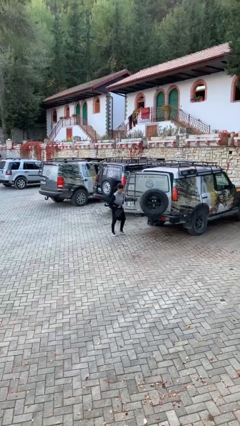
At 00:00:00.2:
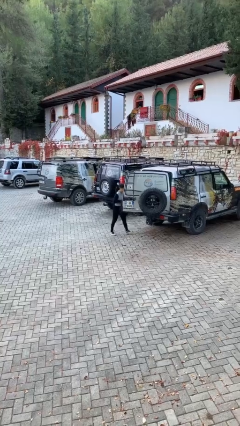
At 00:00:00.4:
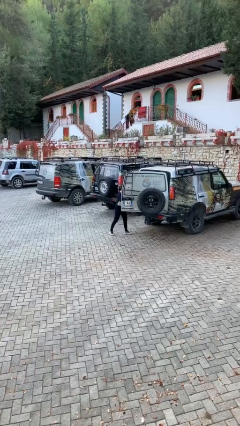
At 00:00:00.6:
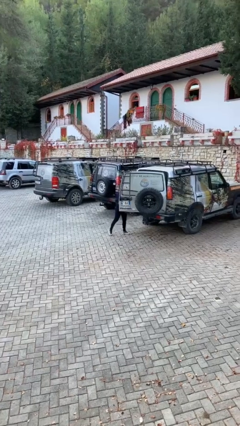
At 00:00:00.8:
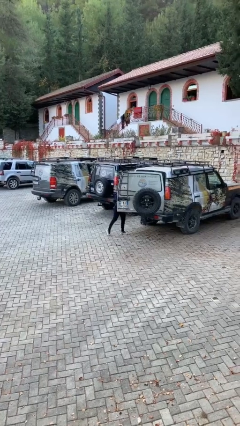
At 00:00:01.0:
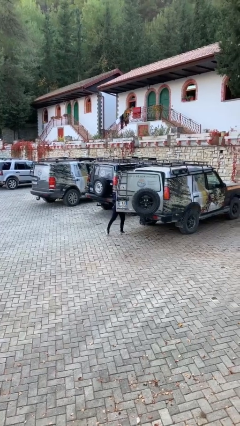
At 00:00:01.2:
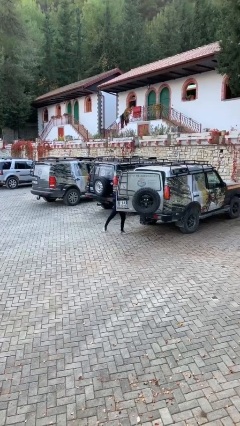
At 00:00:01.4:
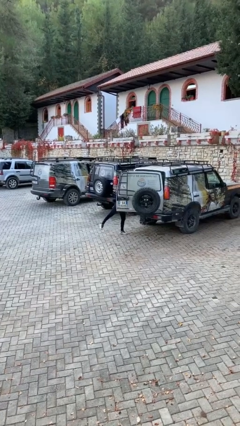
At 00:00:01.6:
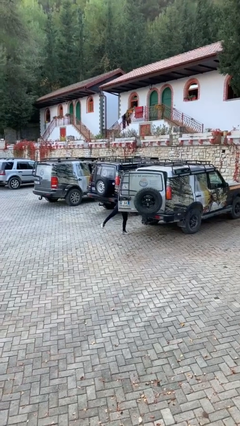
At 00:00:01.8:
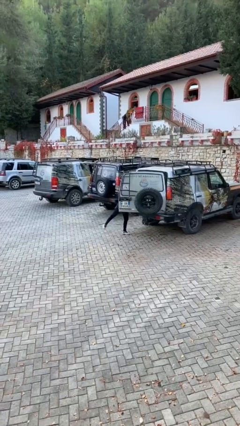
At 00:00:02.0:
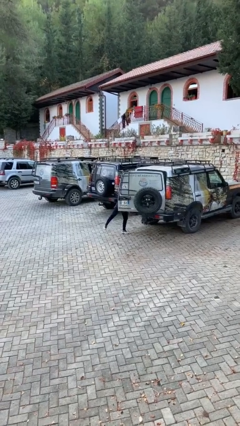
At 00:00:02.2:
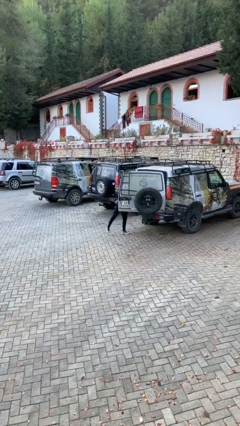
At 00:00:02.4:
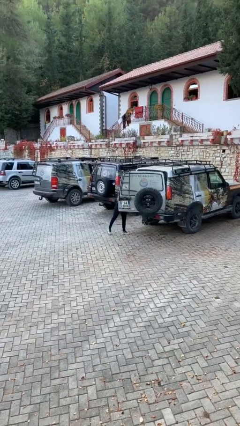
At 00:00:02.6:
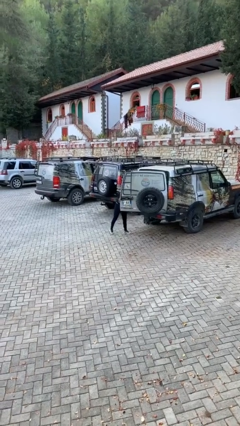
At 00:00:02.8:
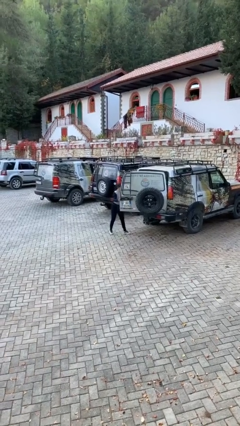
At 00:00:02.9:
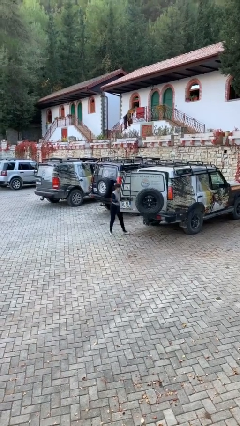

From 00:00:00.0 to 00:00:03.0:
person loads car

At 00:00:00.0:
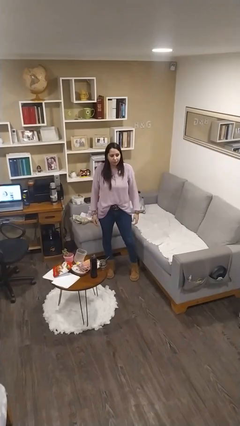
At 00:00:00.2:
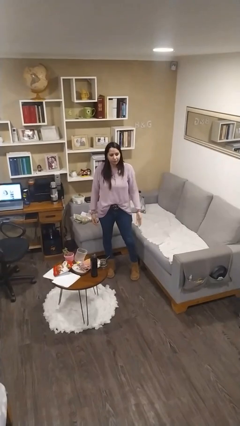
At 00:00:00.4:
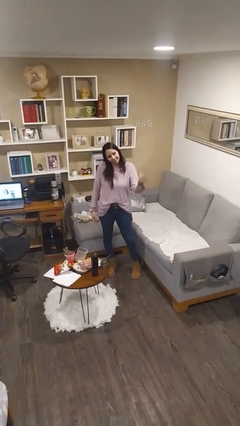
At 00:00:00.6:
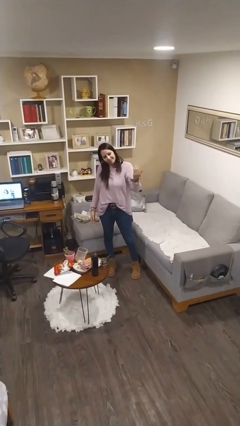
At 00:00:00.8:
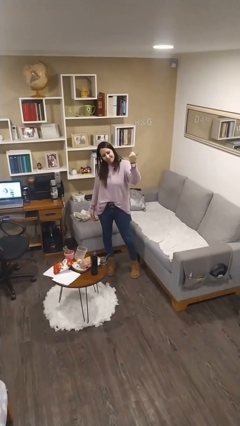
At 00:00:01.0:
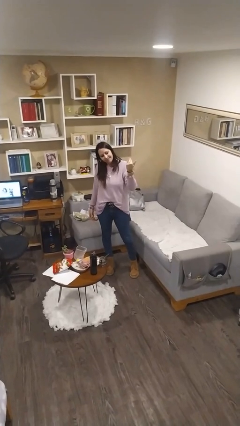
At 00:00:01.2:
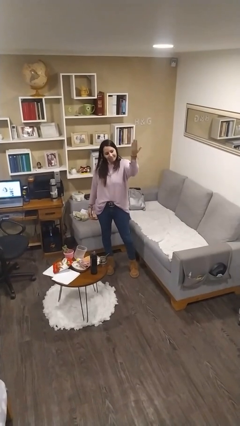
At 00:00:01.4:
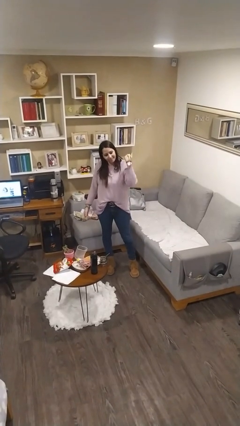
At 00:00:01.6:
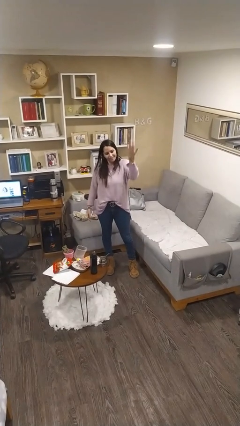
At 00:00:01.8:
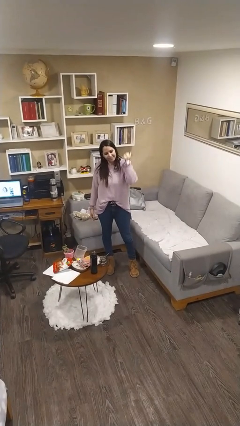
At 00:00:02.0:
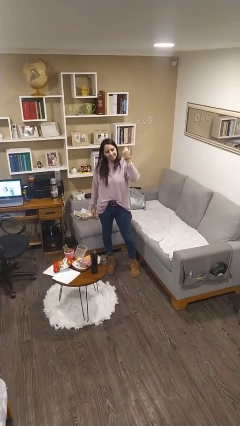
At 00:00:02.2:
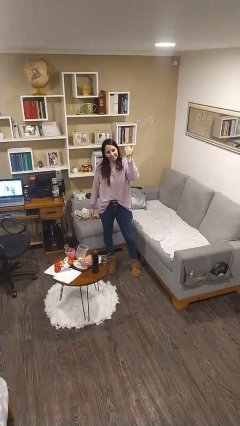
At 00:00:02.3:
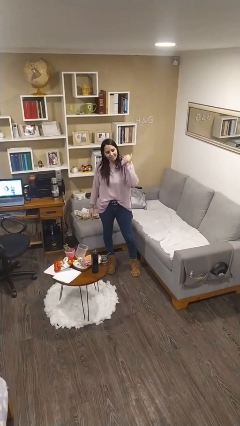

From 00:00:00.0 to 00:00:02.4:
person gestures come here

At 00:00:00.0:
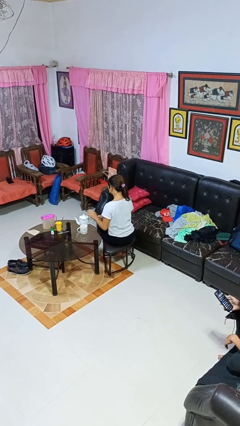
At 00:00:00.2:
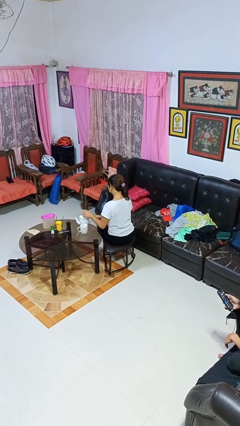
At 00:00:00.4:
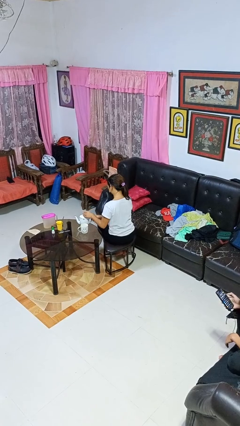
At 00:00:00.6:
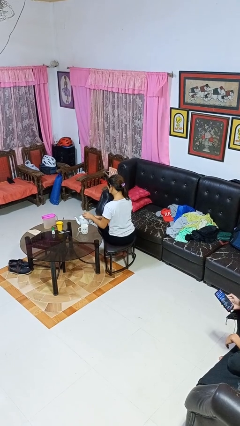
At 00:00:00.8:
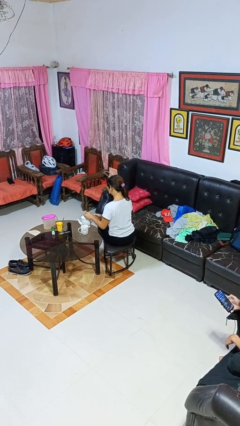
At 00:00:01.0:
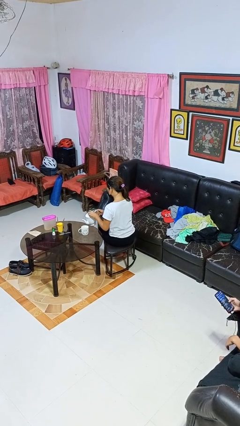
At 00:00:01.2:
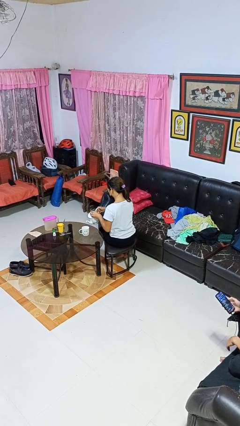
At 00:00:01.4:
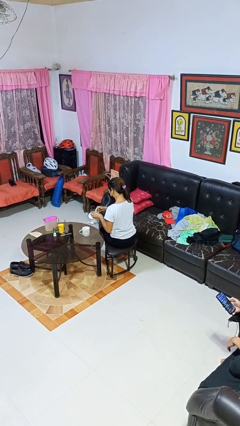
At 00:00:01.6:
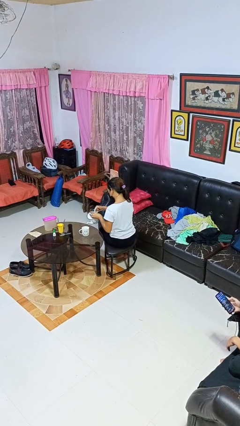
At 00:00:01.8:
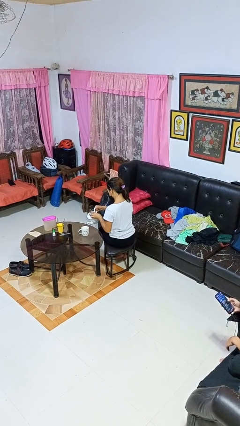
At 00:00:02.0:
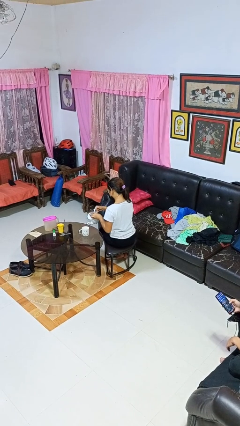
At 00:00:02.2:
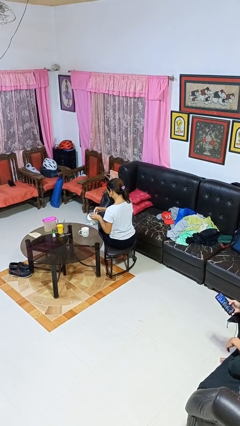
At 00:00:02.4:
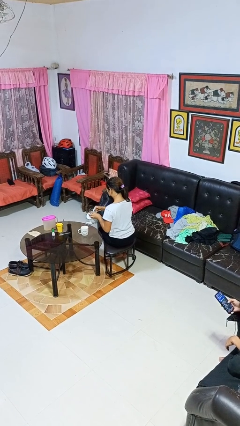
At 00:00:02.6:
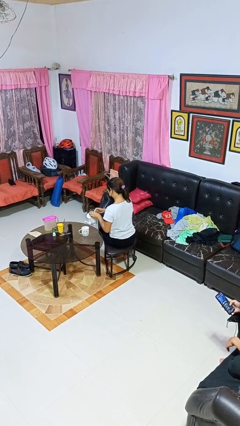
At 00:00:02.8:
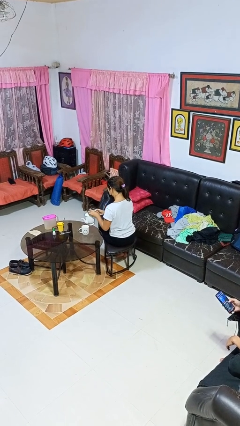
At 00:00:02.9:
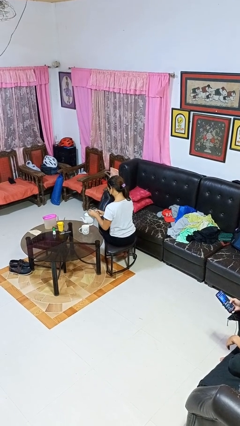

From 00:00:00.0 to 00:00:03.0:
person pours coffee into mug

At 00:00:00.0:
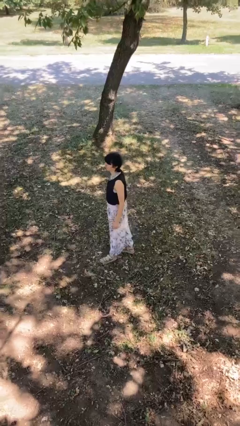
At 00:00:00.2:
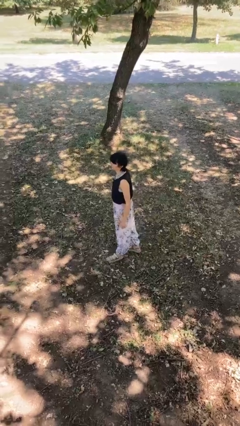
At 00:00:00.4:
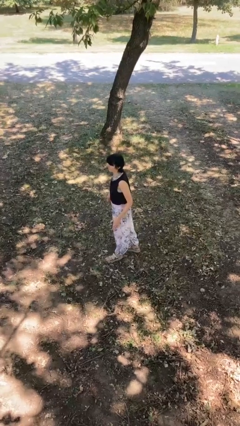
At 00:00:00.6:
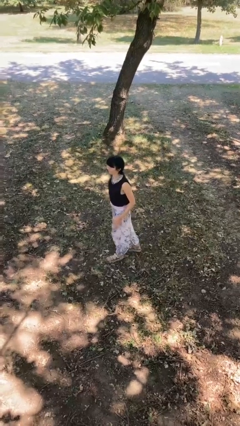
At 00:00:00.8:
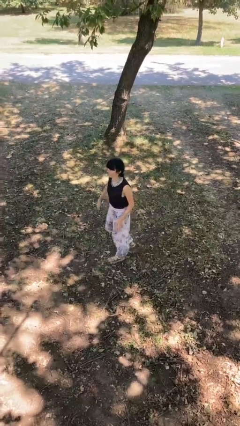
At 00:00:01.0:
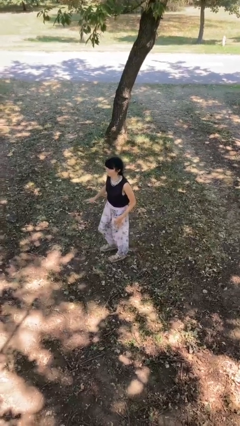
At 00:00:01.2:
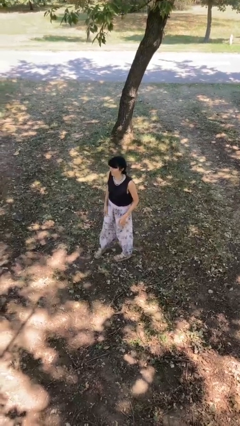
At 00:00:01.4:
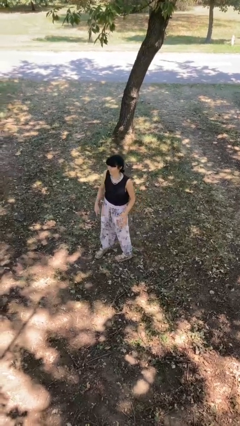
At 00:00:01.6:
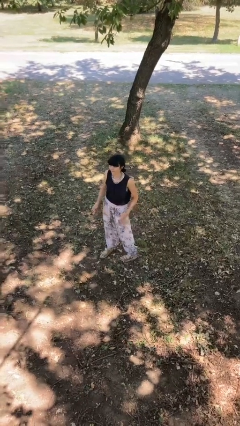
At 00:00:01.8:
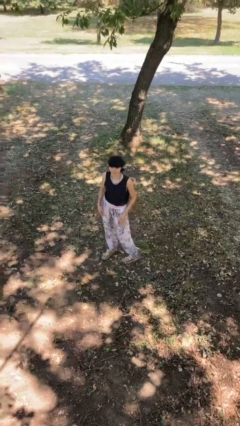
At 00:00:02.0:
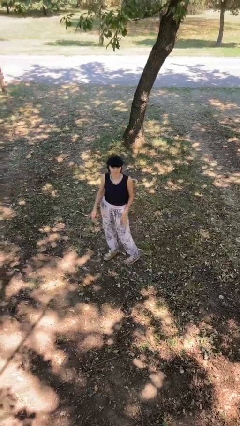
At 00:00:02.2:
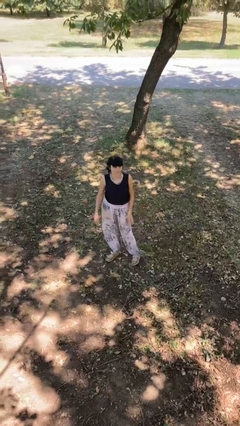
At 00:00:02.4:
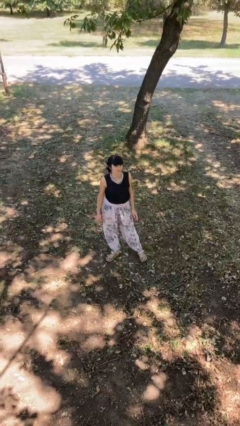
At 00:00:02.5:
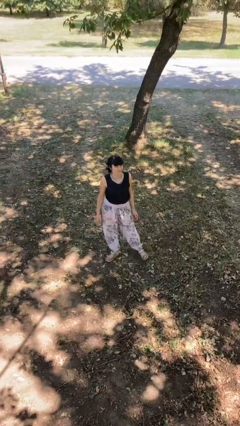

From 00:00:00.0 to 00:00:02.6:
person slaps hands on thighs

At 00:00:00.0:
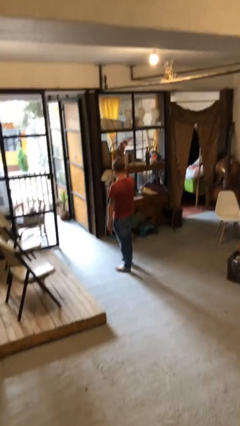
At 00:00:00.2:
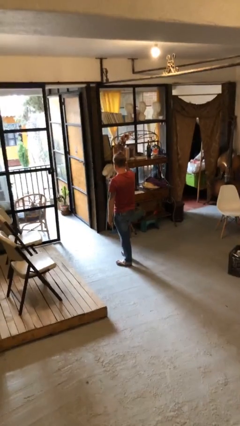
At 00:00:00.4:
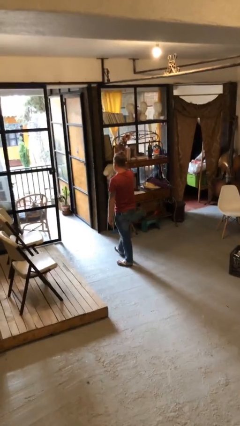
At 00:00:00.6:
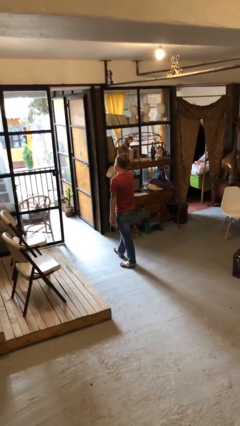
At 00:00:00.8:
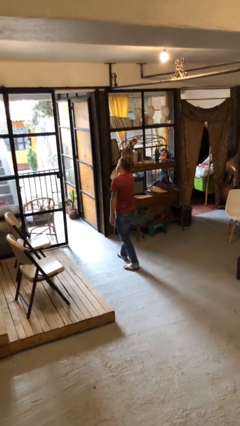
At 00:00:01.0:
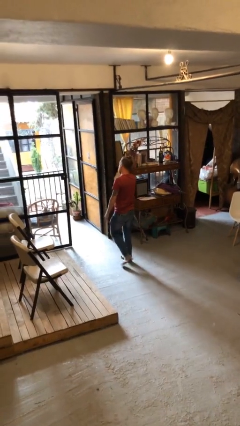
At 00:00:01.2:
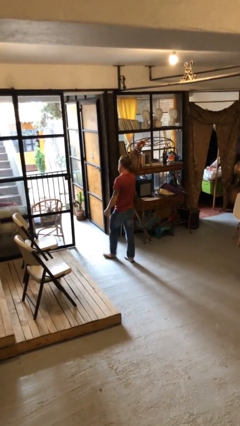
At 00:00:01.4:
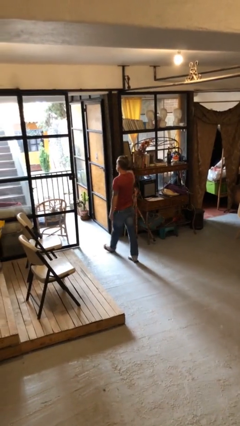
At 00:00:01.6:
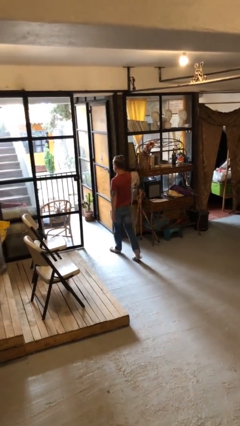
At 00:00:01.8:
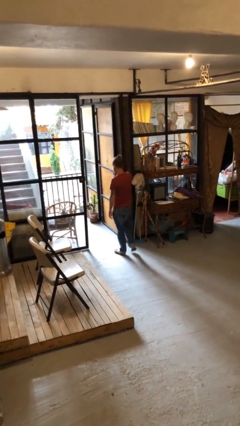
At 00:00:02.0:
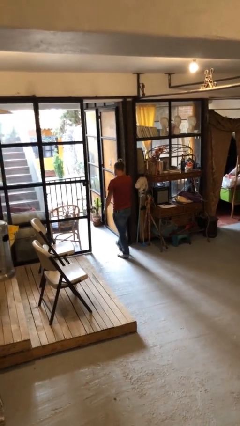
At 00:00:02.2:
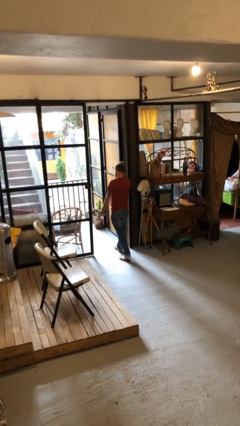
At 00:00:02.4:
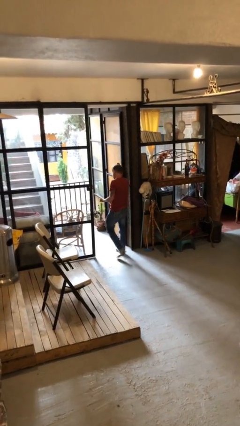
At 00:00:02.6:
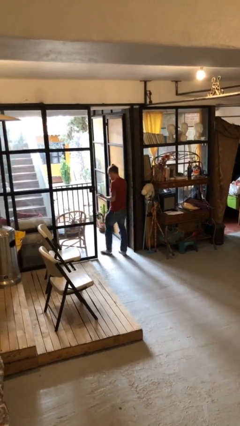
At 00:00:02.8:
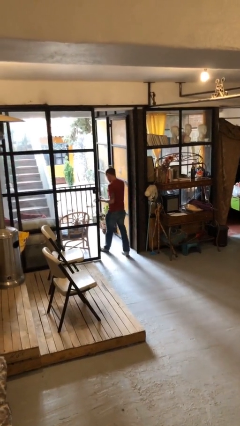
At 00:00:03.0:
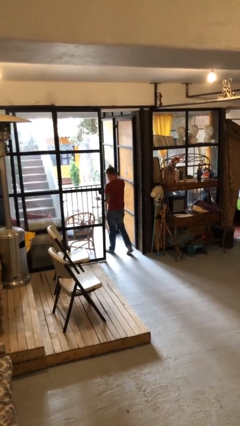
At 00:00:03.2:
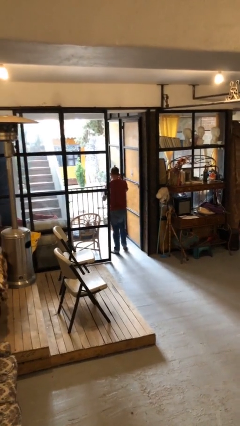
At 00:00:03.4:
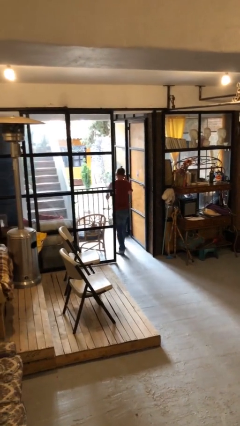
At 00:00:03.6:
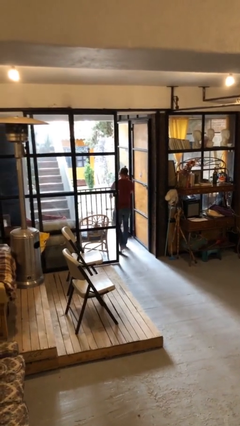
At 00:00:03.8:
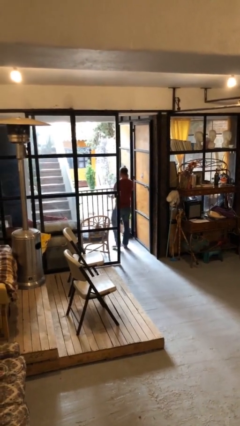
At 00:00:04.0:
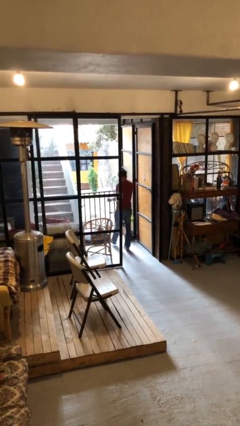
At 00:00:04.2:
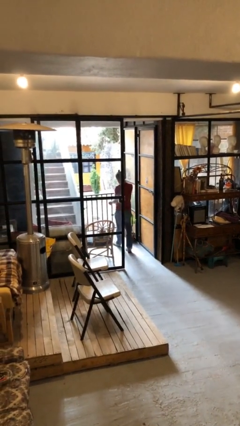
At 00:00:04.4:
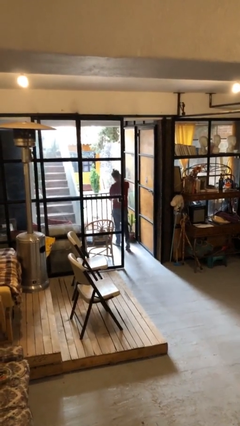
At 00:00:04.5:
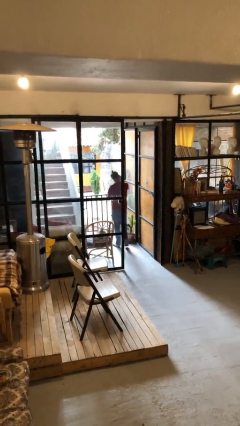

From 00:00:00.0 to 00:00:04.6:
person exits scene through structure

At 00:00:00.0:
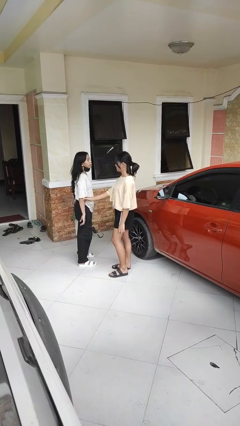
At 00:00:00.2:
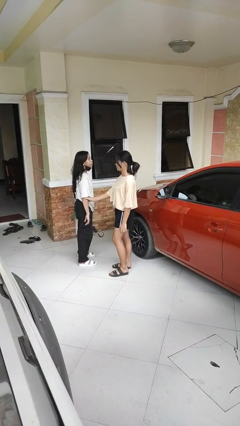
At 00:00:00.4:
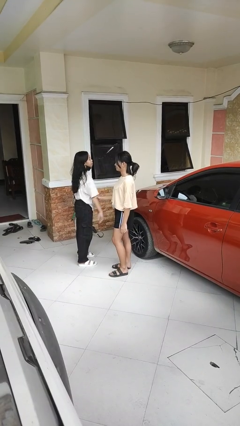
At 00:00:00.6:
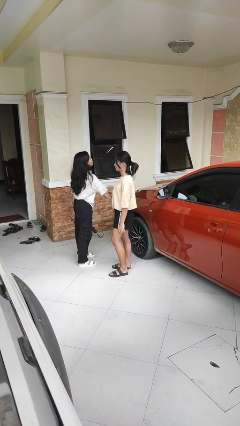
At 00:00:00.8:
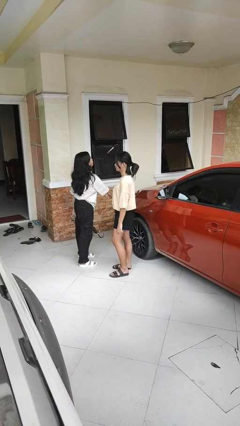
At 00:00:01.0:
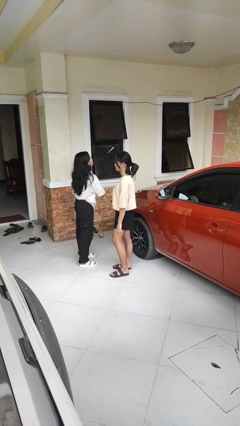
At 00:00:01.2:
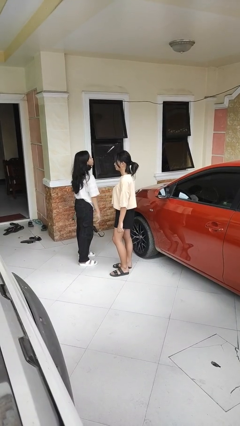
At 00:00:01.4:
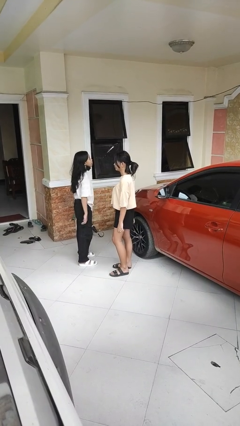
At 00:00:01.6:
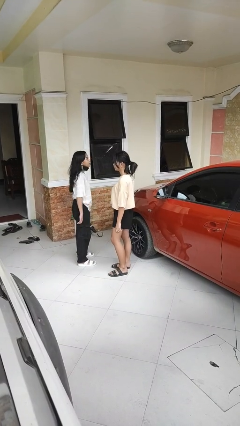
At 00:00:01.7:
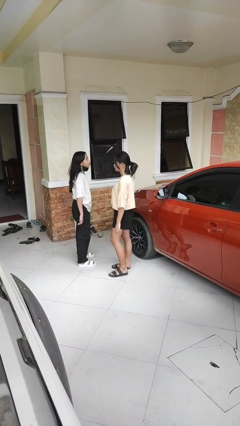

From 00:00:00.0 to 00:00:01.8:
person grabs person by forearm
